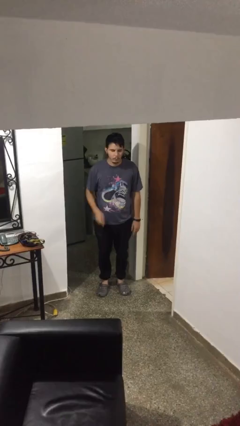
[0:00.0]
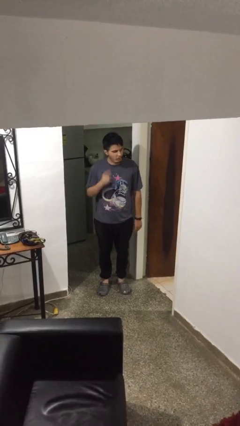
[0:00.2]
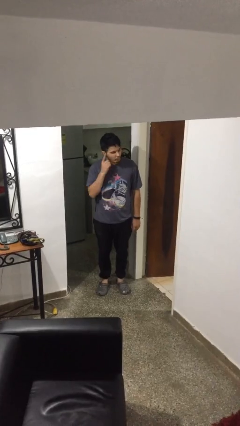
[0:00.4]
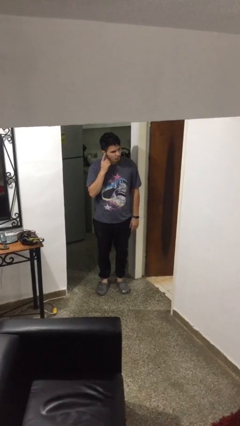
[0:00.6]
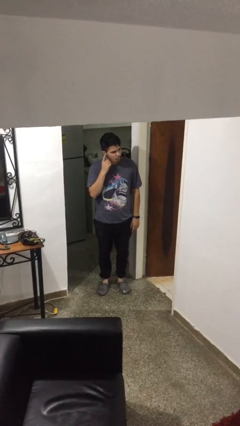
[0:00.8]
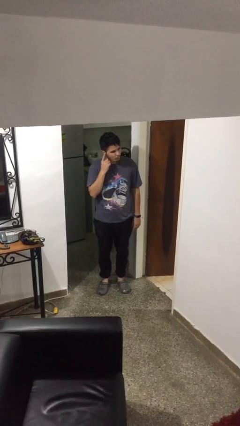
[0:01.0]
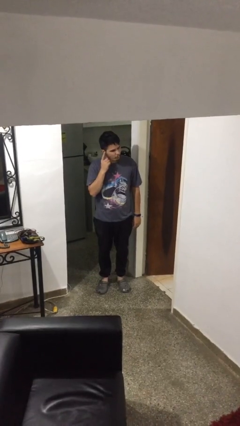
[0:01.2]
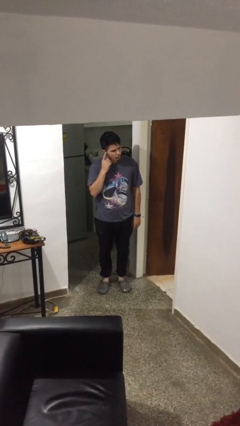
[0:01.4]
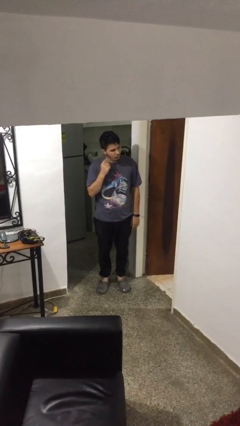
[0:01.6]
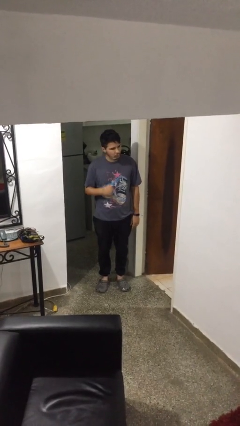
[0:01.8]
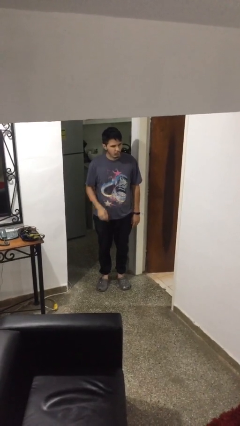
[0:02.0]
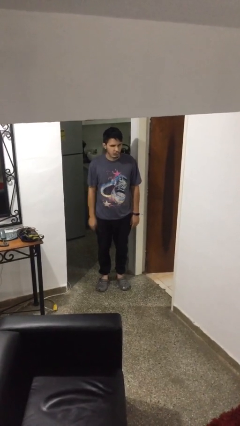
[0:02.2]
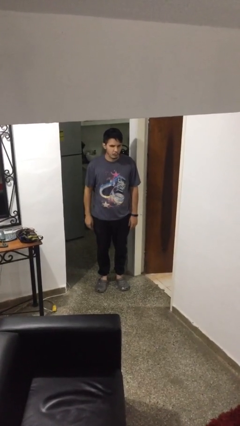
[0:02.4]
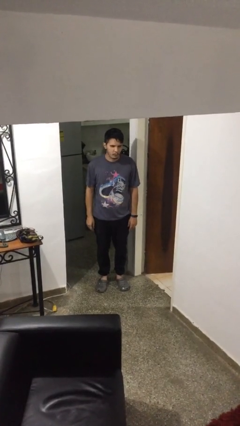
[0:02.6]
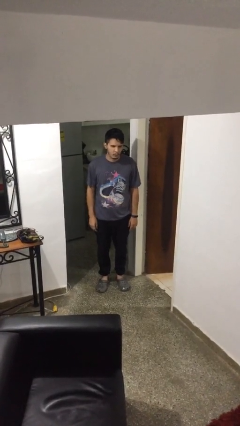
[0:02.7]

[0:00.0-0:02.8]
person gestures listen closely

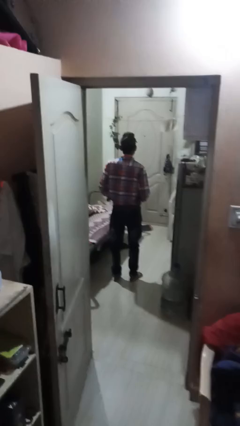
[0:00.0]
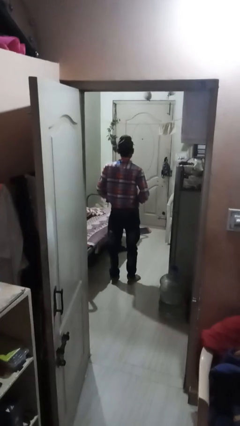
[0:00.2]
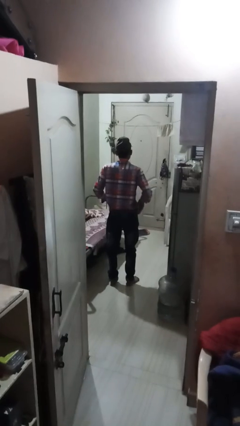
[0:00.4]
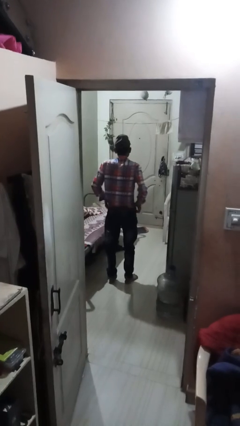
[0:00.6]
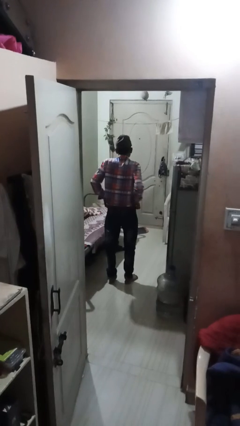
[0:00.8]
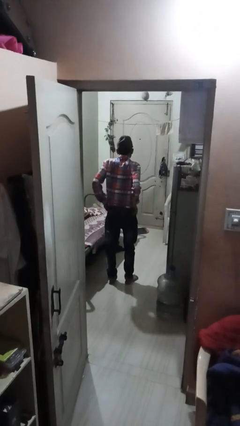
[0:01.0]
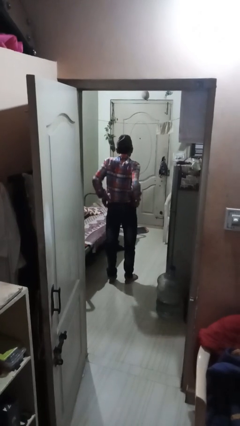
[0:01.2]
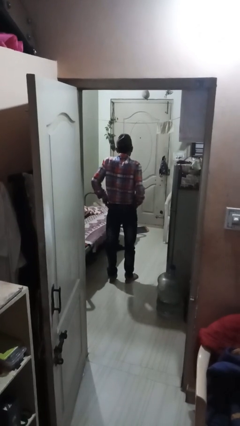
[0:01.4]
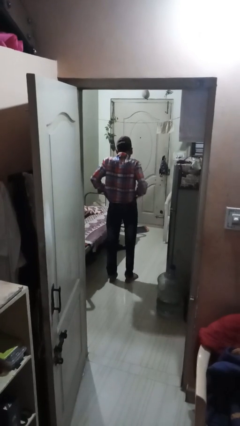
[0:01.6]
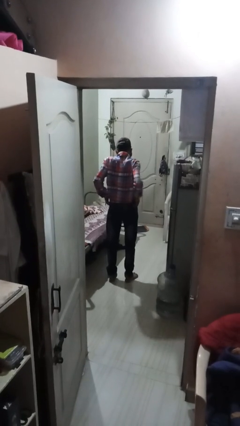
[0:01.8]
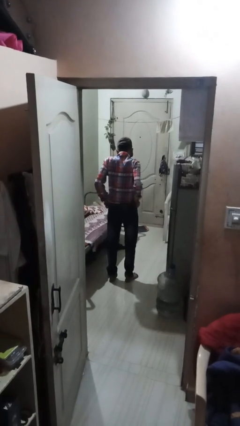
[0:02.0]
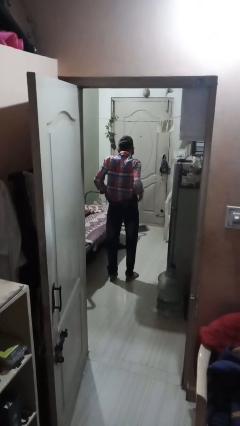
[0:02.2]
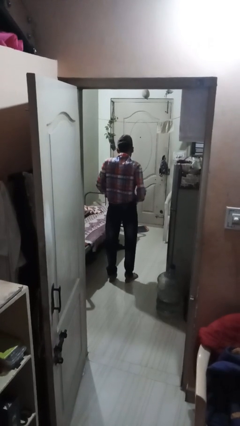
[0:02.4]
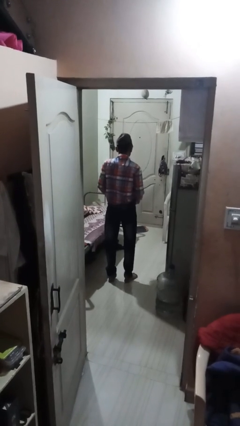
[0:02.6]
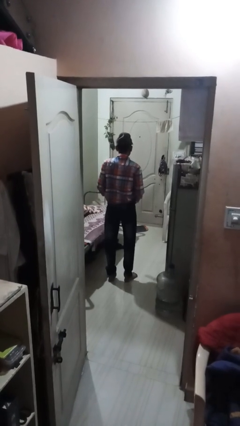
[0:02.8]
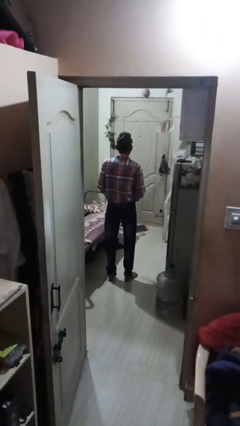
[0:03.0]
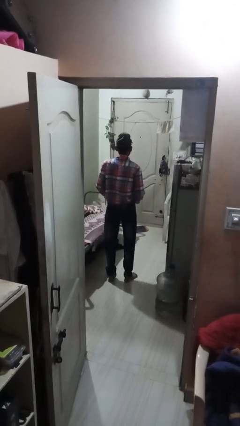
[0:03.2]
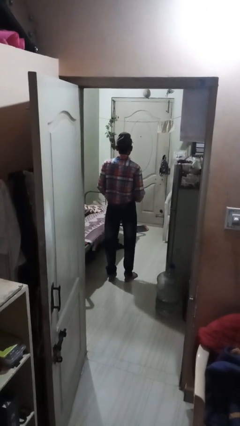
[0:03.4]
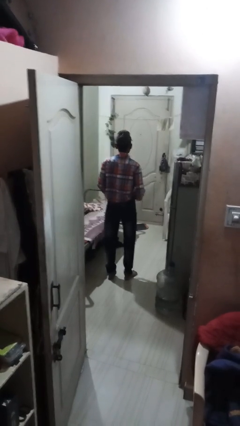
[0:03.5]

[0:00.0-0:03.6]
person hikes up pants

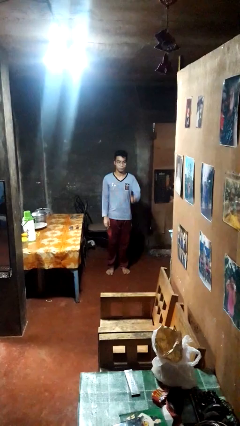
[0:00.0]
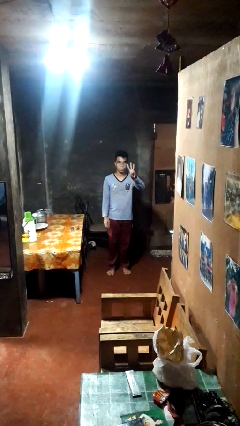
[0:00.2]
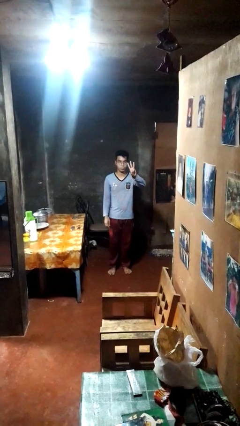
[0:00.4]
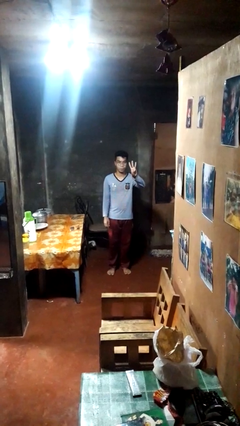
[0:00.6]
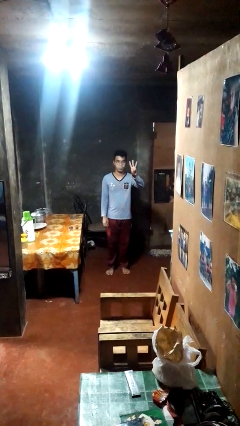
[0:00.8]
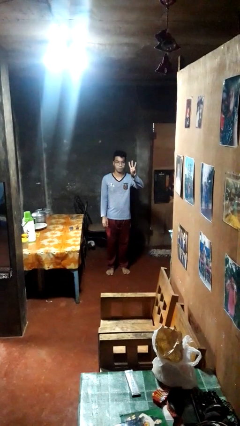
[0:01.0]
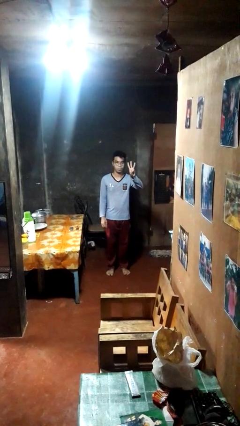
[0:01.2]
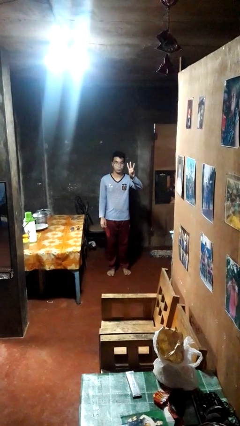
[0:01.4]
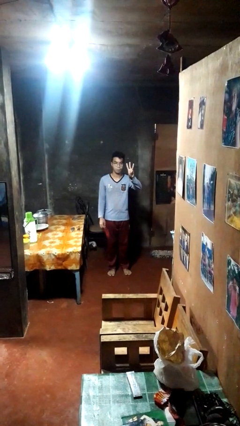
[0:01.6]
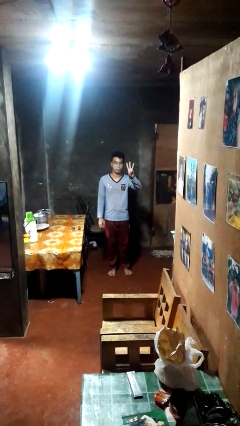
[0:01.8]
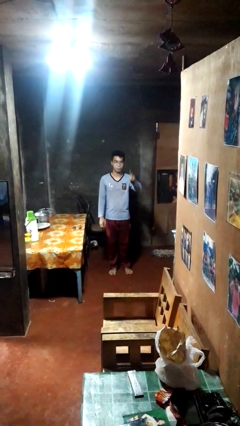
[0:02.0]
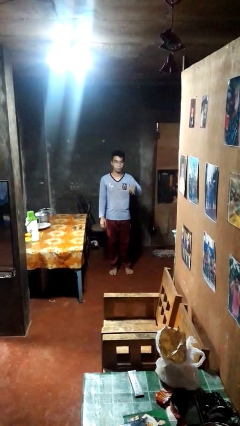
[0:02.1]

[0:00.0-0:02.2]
person gestures number three

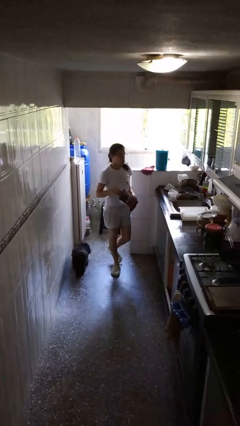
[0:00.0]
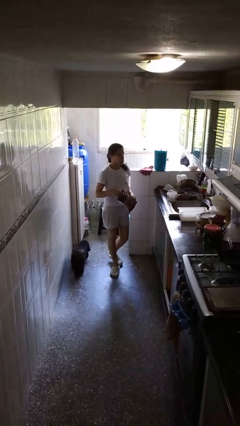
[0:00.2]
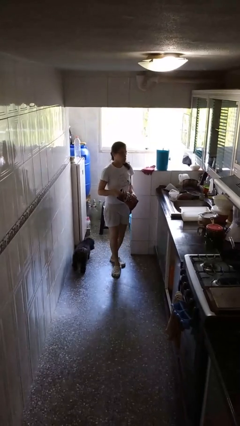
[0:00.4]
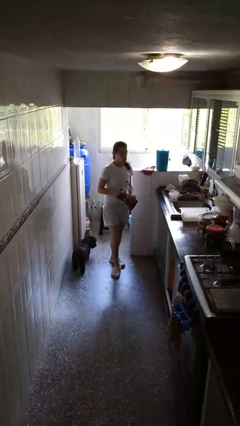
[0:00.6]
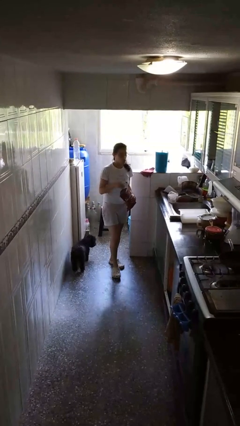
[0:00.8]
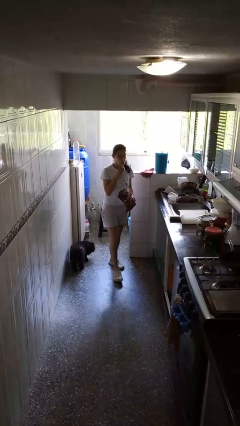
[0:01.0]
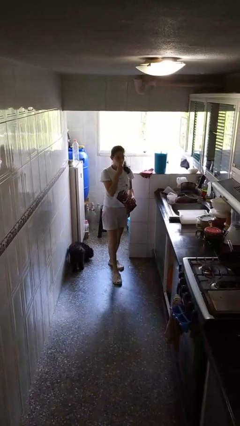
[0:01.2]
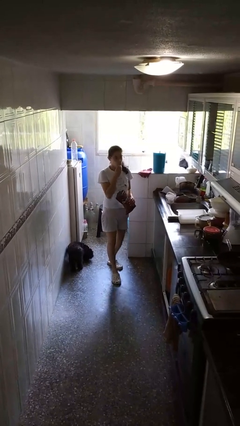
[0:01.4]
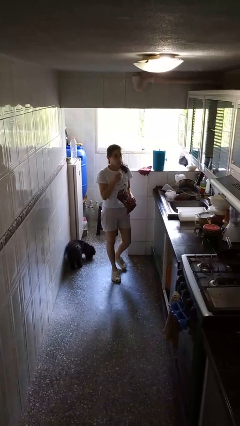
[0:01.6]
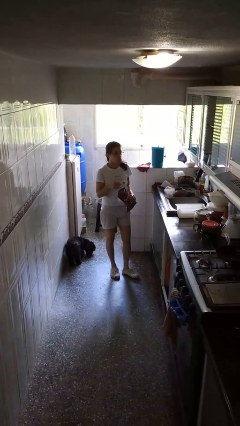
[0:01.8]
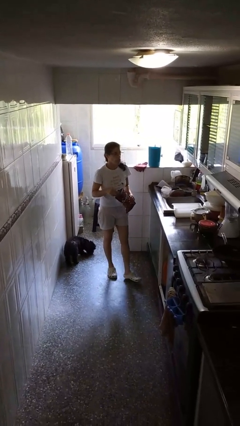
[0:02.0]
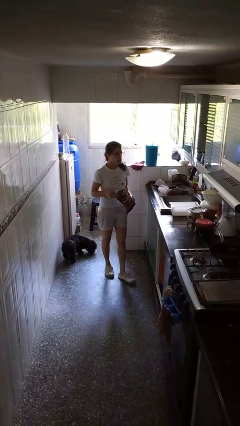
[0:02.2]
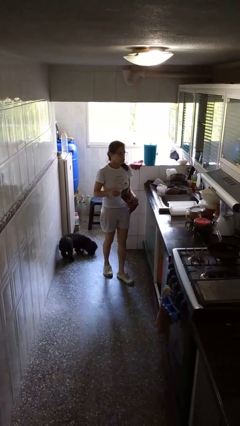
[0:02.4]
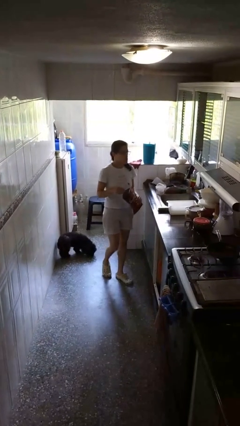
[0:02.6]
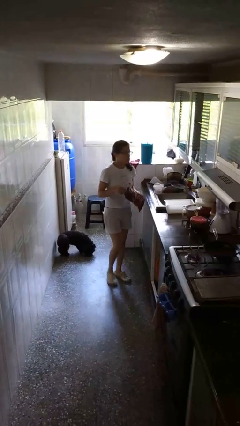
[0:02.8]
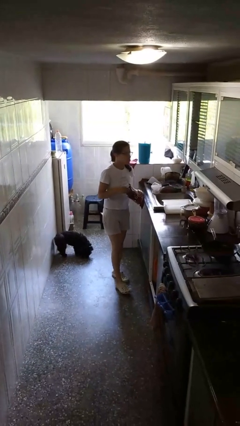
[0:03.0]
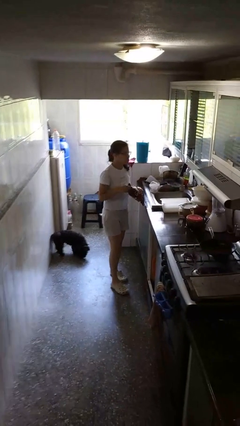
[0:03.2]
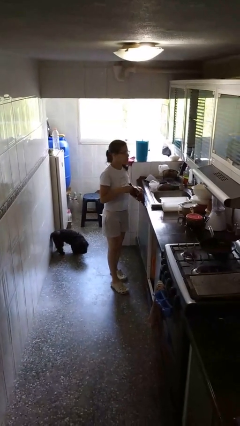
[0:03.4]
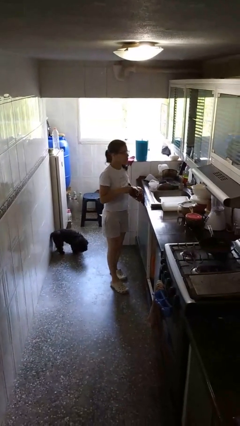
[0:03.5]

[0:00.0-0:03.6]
person eats snack from bag

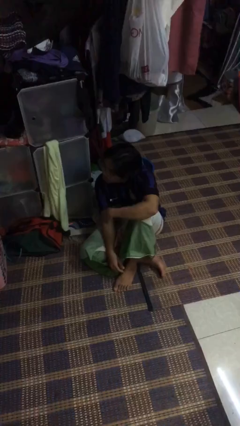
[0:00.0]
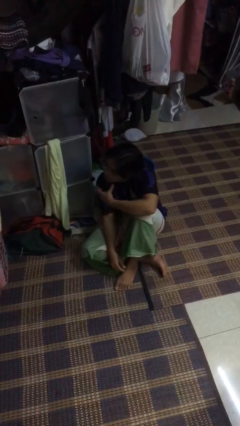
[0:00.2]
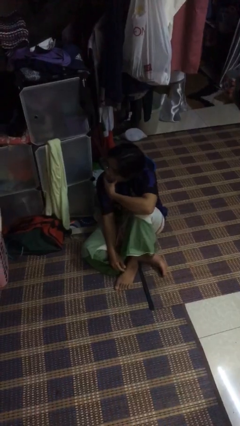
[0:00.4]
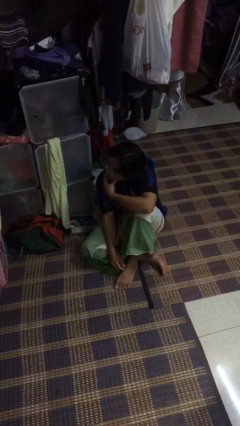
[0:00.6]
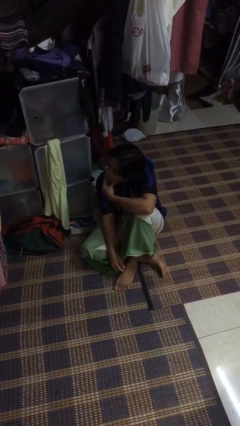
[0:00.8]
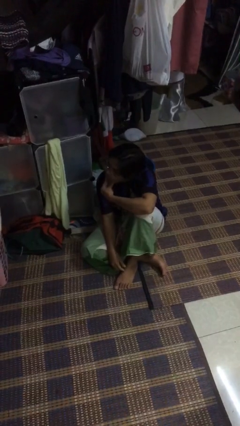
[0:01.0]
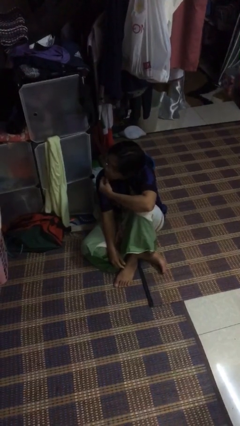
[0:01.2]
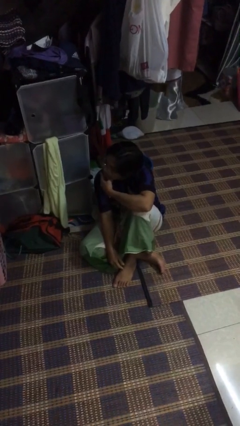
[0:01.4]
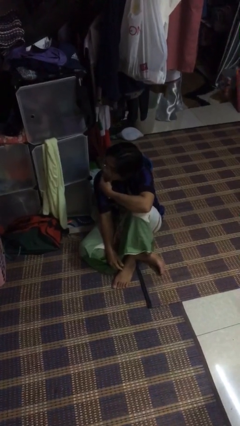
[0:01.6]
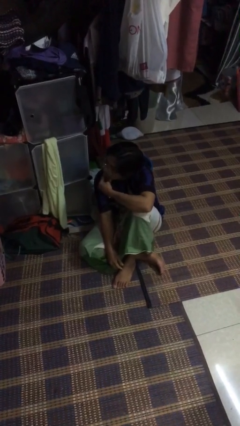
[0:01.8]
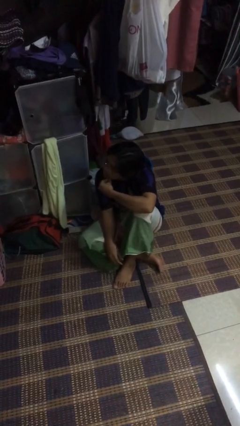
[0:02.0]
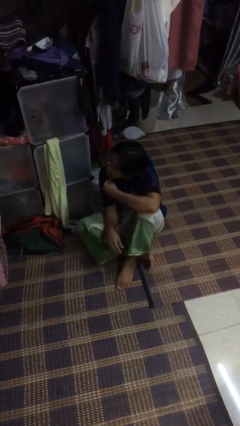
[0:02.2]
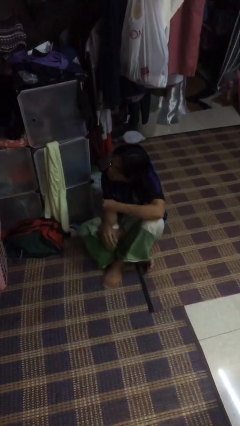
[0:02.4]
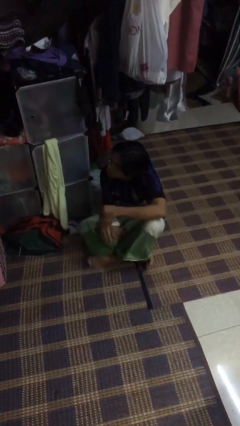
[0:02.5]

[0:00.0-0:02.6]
person strokes chin

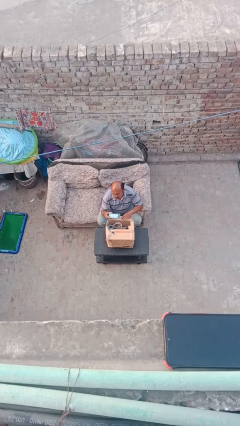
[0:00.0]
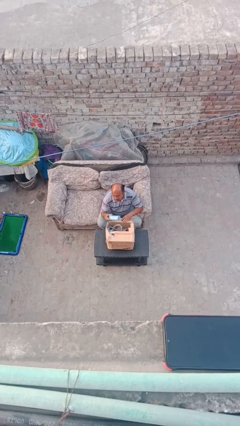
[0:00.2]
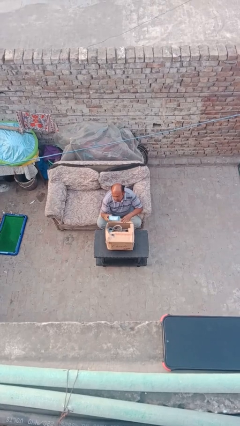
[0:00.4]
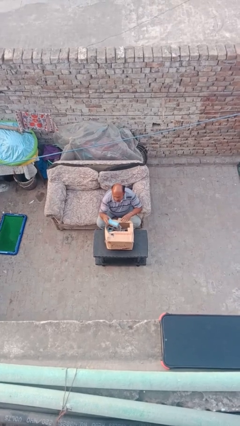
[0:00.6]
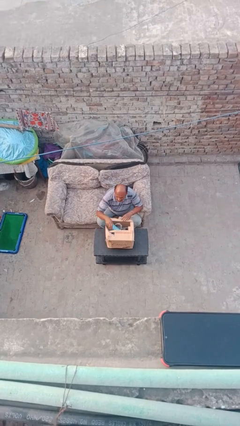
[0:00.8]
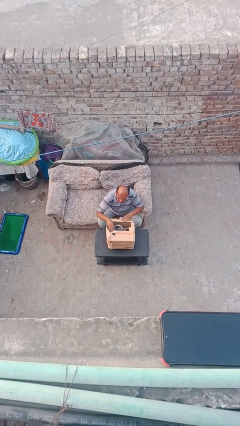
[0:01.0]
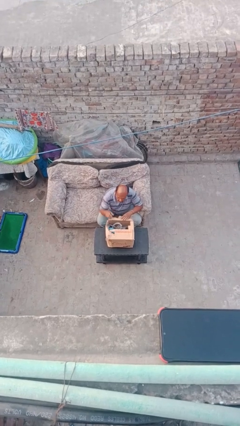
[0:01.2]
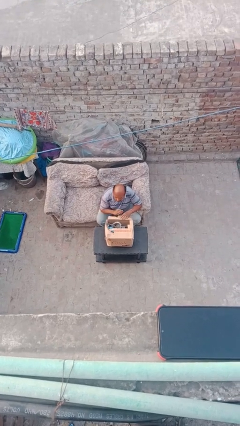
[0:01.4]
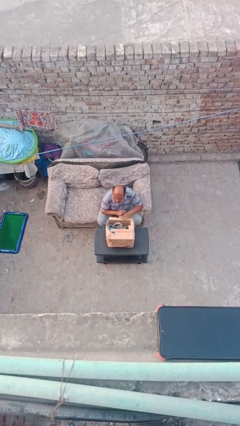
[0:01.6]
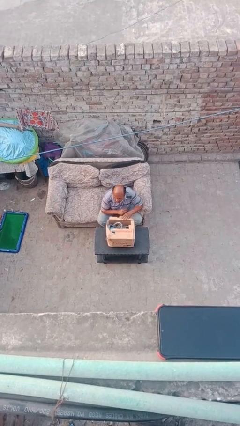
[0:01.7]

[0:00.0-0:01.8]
person puts object into box

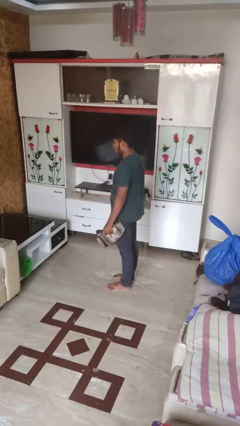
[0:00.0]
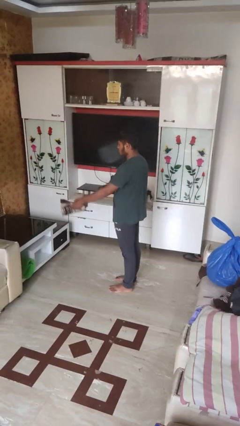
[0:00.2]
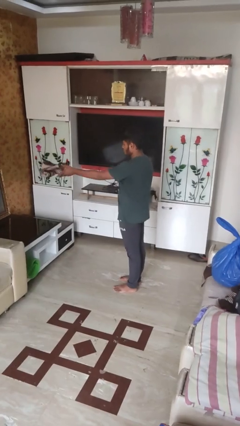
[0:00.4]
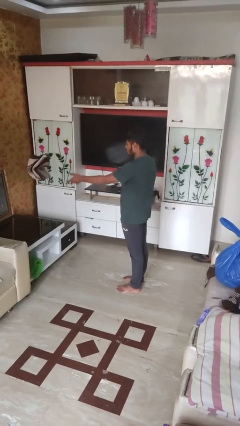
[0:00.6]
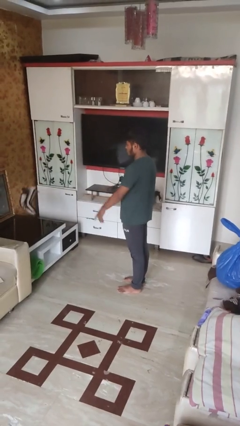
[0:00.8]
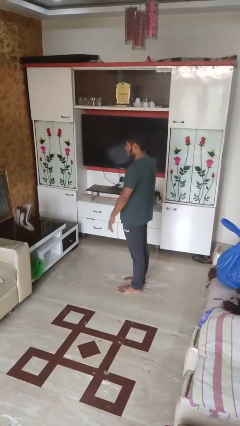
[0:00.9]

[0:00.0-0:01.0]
person throws object on table
